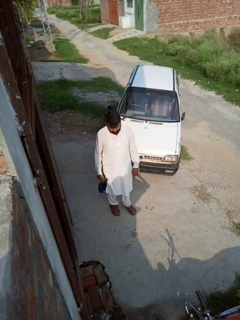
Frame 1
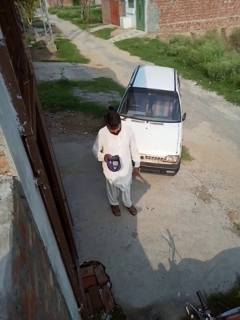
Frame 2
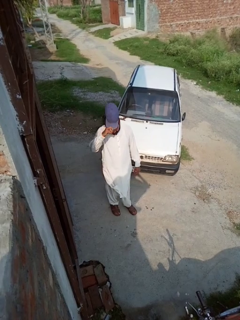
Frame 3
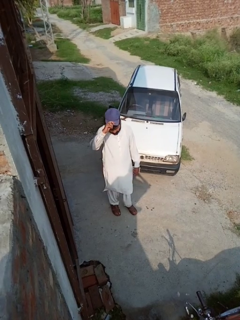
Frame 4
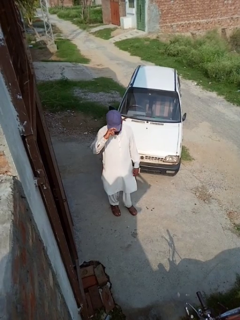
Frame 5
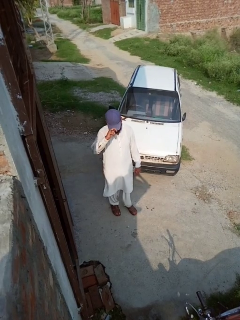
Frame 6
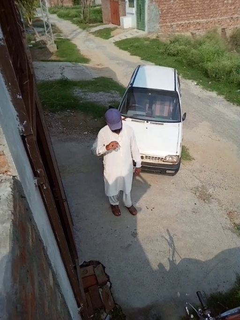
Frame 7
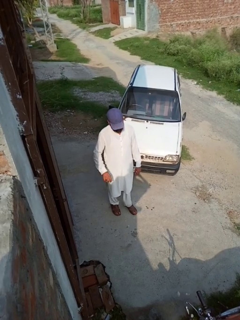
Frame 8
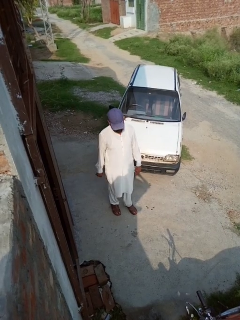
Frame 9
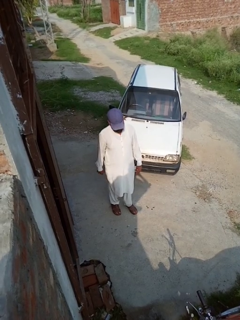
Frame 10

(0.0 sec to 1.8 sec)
person puts on hat

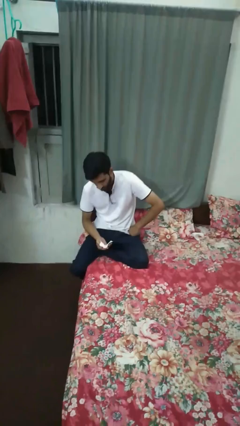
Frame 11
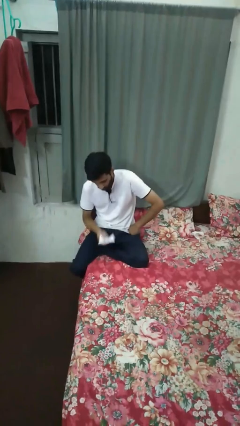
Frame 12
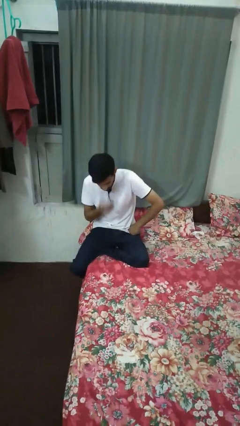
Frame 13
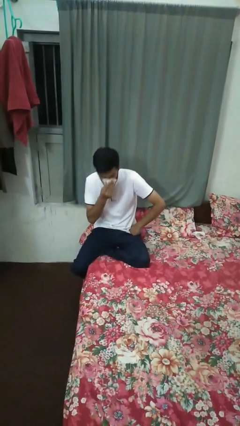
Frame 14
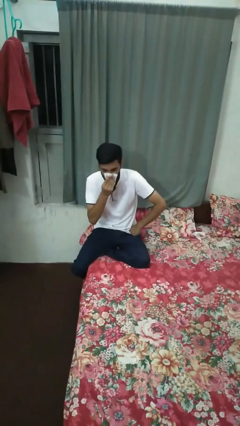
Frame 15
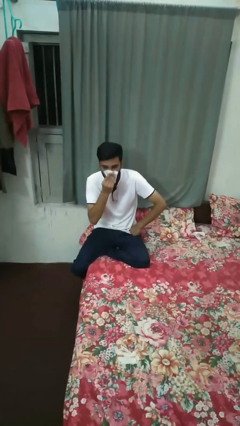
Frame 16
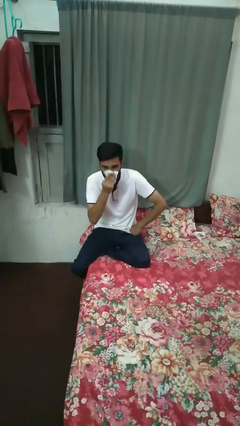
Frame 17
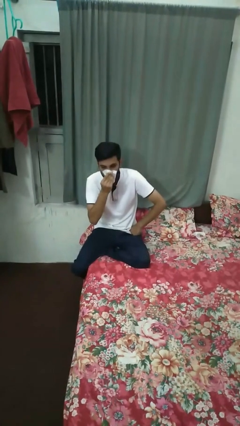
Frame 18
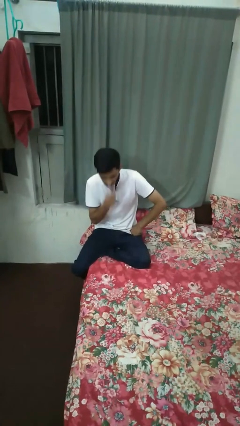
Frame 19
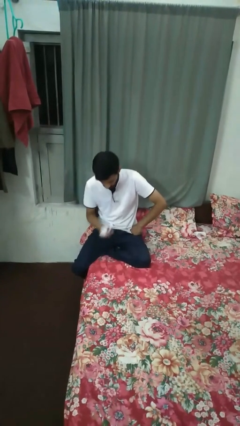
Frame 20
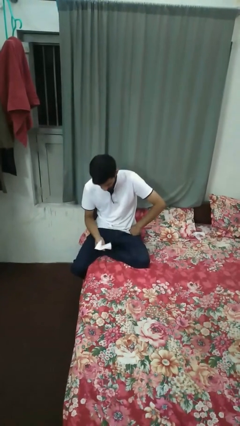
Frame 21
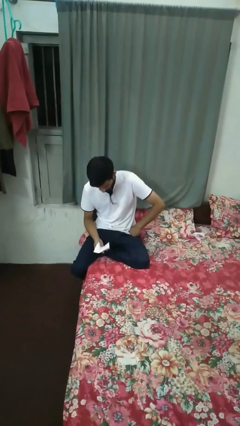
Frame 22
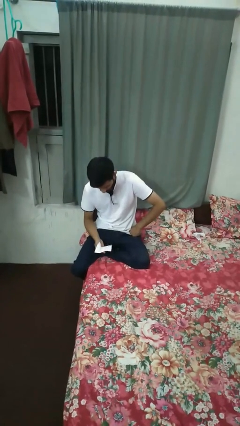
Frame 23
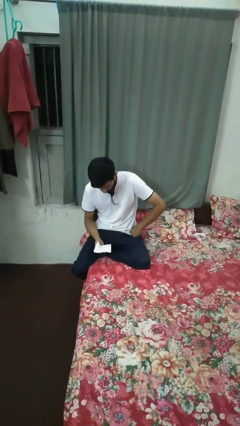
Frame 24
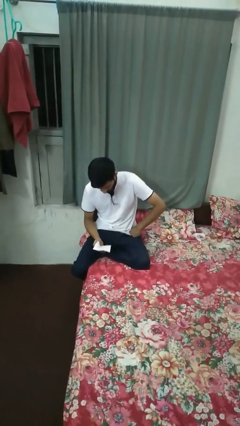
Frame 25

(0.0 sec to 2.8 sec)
person blows nose

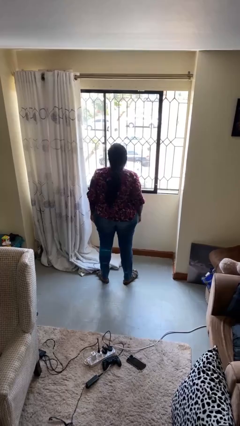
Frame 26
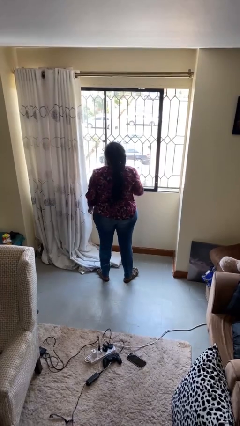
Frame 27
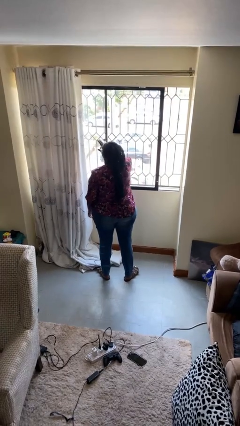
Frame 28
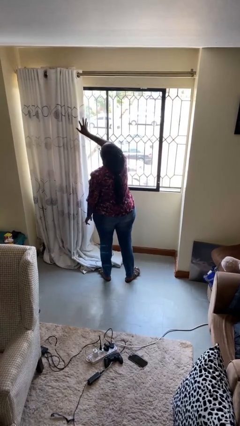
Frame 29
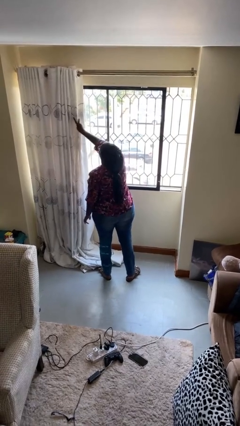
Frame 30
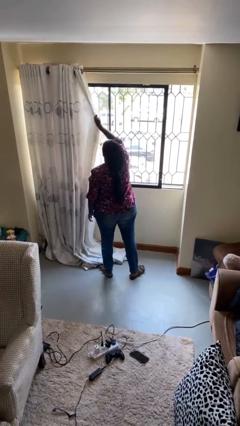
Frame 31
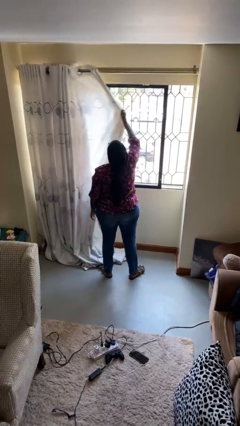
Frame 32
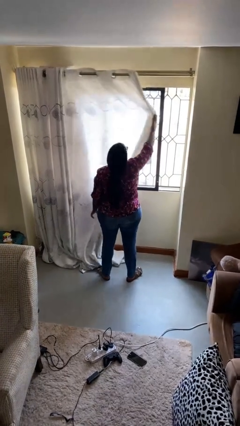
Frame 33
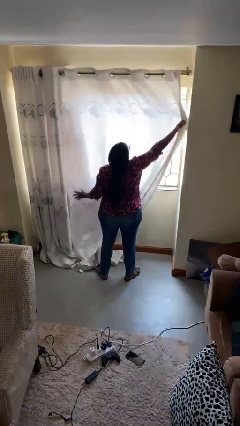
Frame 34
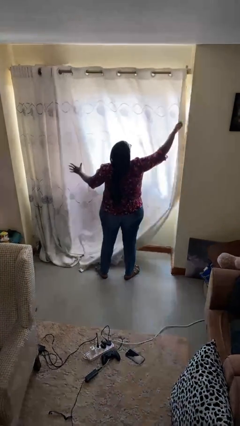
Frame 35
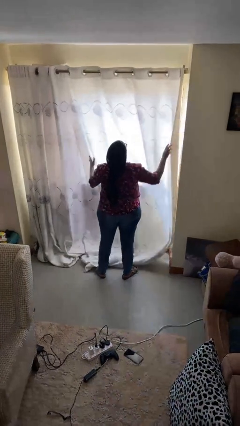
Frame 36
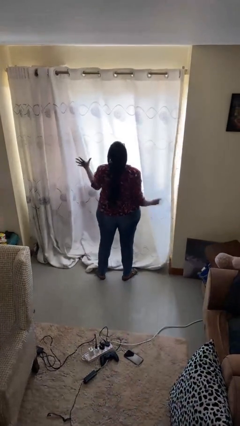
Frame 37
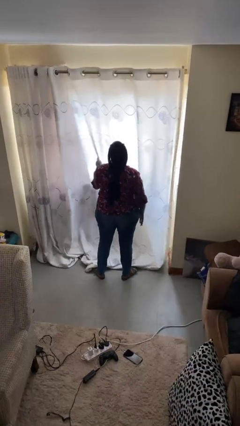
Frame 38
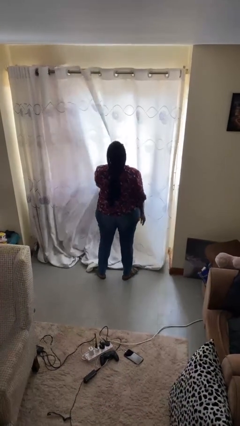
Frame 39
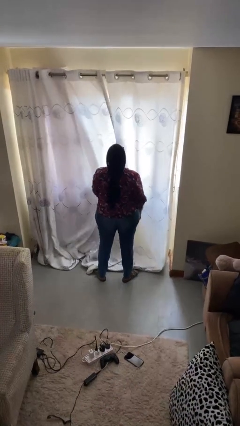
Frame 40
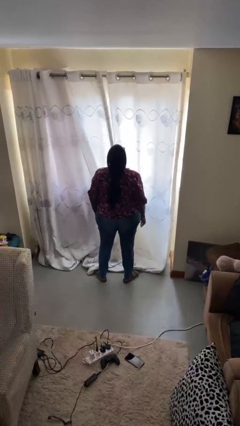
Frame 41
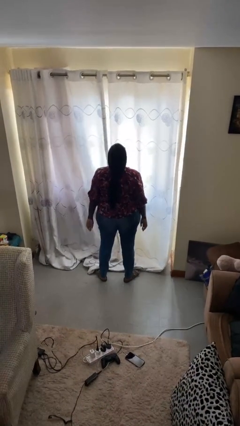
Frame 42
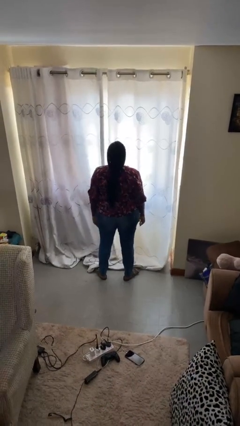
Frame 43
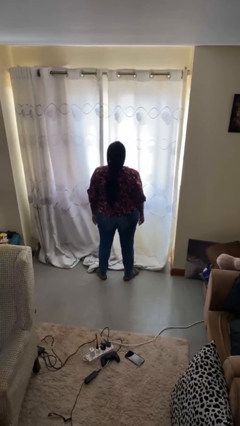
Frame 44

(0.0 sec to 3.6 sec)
person closes curtains

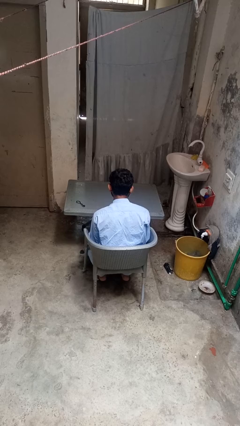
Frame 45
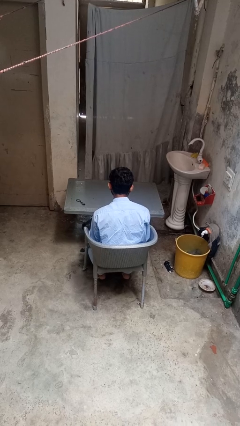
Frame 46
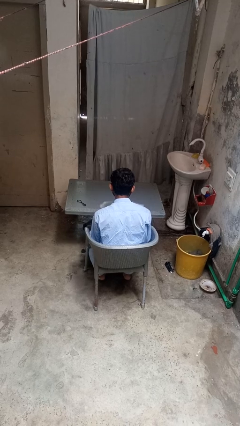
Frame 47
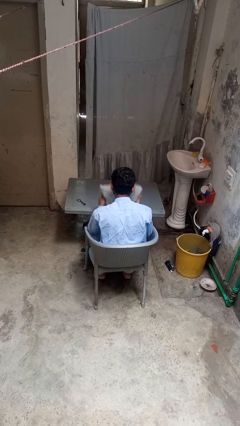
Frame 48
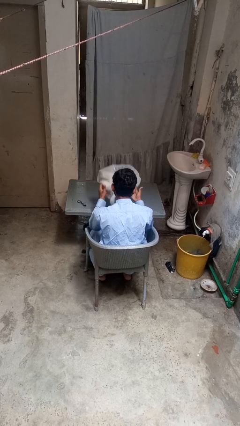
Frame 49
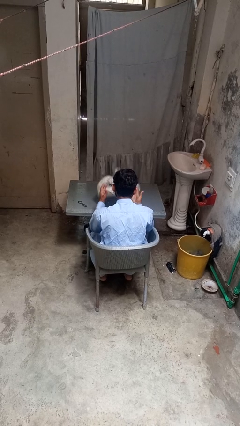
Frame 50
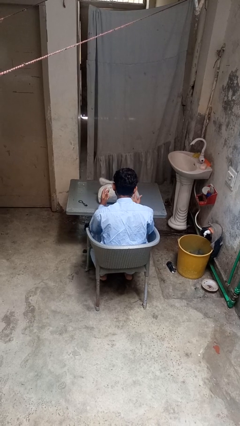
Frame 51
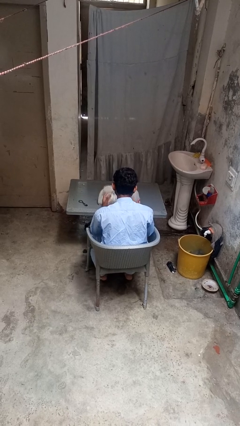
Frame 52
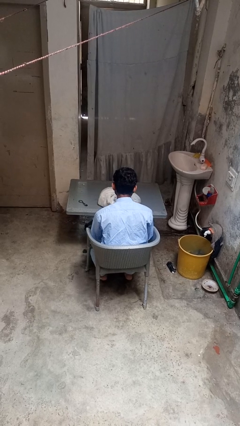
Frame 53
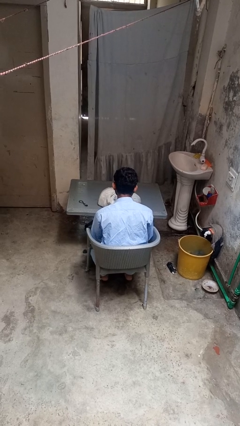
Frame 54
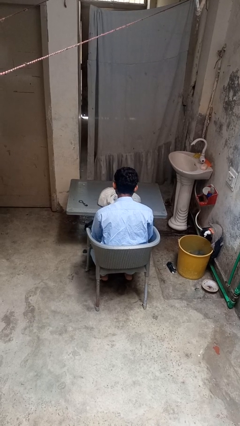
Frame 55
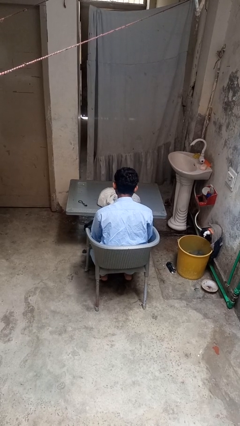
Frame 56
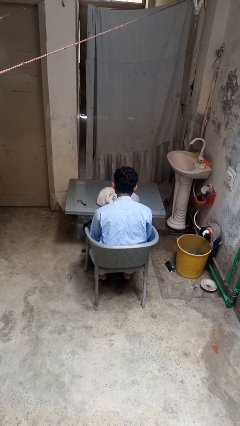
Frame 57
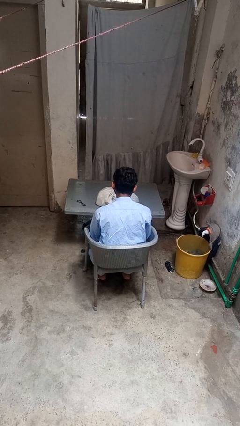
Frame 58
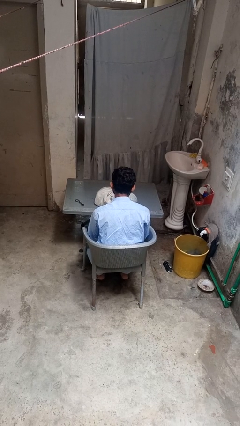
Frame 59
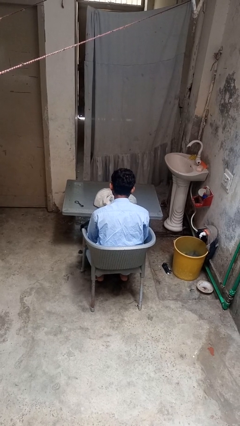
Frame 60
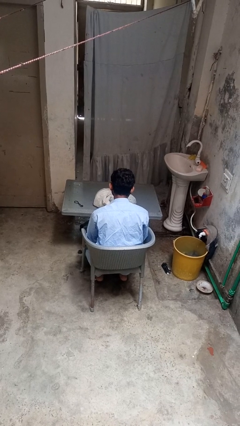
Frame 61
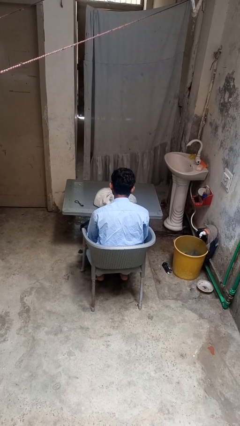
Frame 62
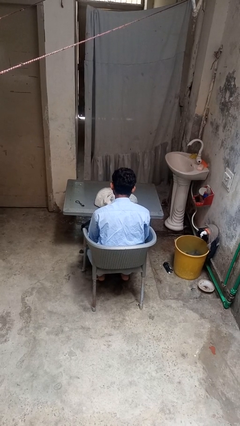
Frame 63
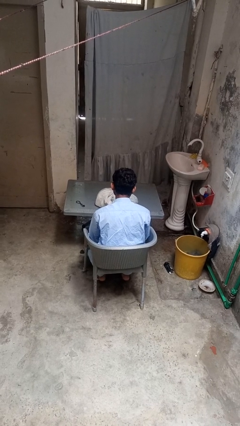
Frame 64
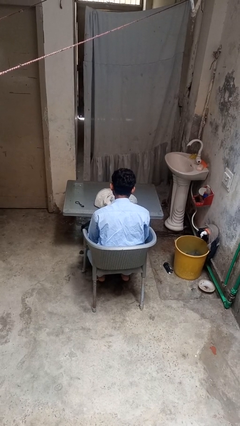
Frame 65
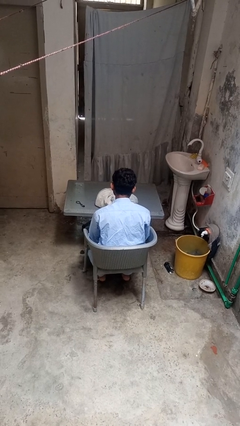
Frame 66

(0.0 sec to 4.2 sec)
person throws object on table

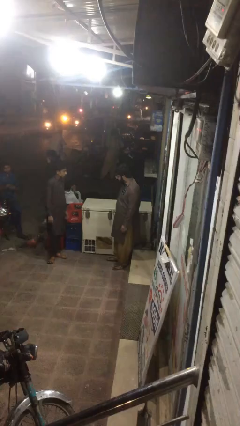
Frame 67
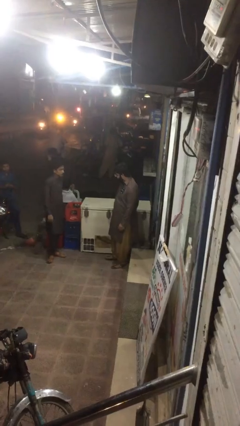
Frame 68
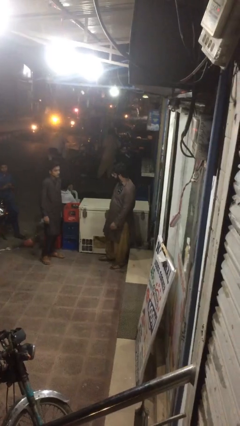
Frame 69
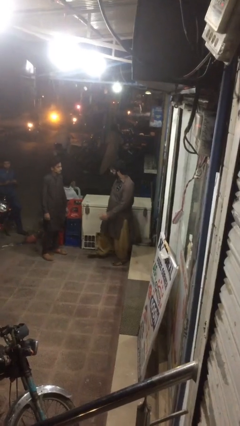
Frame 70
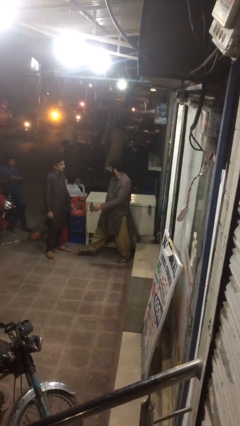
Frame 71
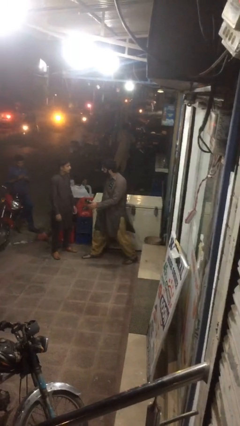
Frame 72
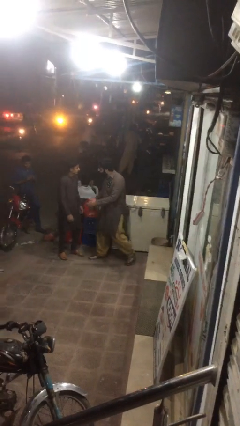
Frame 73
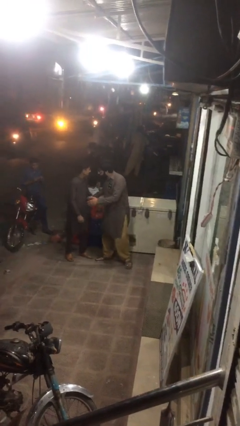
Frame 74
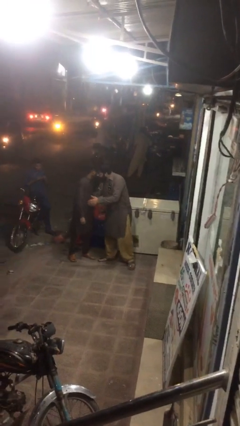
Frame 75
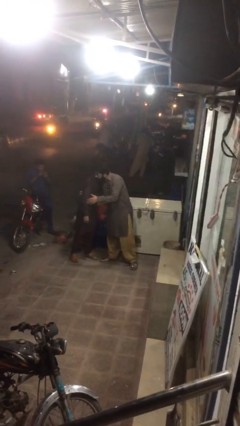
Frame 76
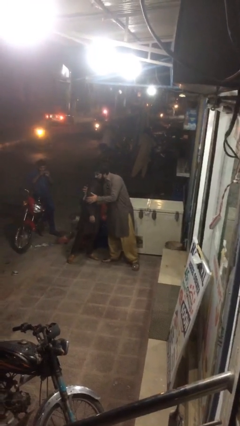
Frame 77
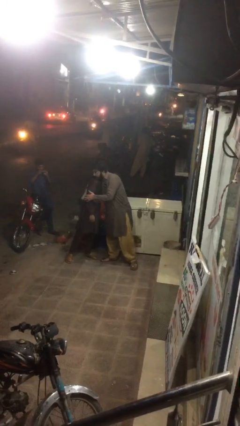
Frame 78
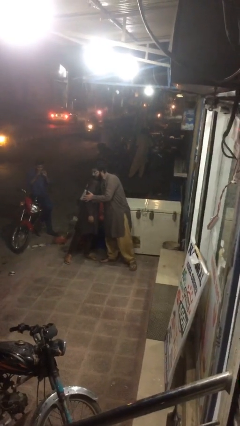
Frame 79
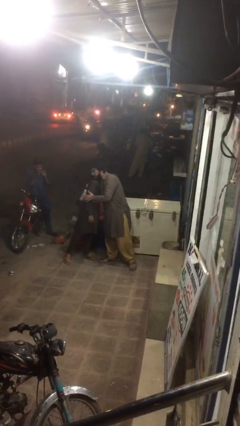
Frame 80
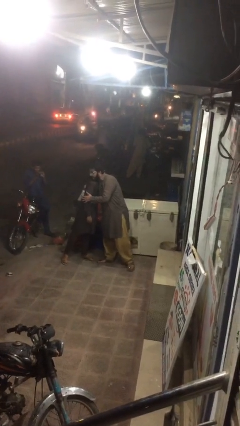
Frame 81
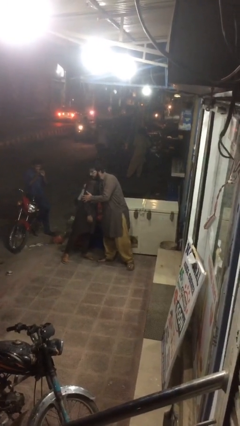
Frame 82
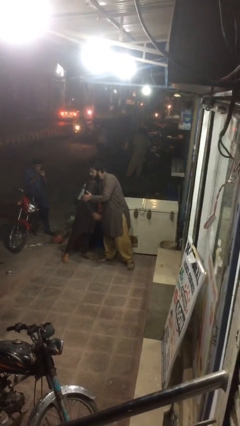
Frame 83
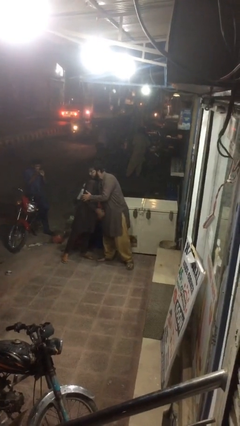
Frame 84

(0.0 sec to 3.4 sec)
person embraces person

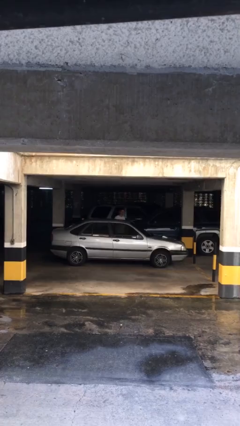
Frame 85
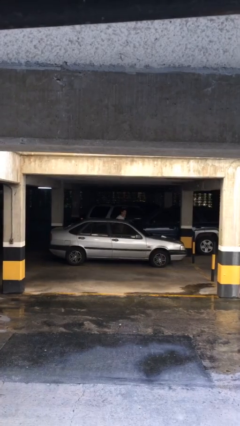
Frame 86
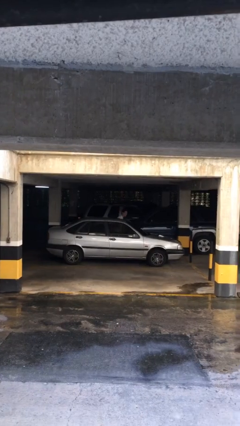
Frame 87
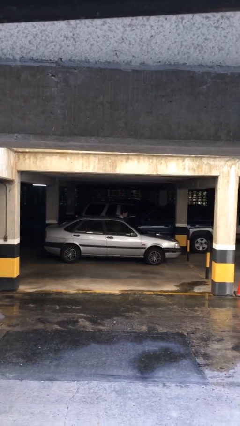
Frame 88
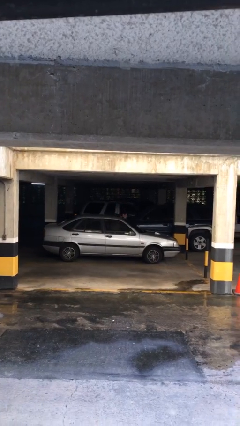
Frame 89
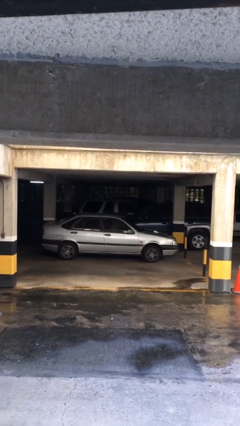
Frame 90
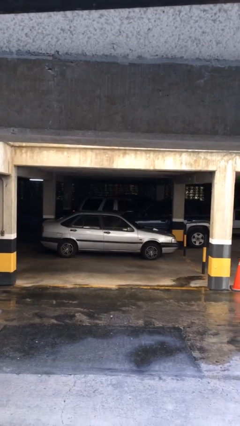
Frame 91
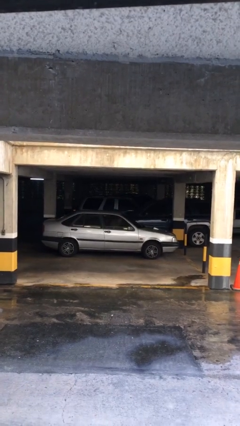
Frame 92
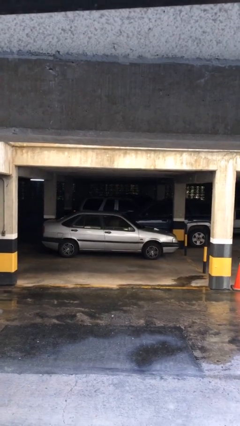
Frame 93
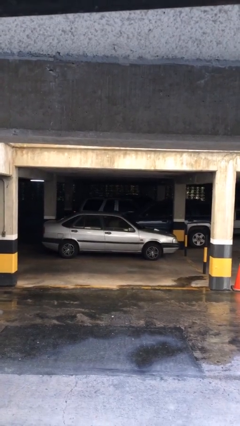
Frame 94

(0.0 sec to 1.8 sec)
person enters car
